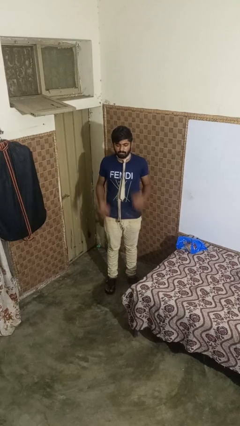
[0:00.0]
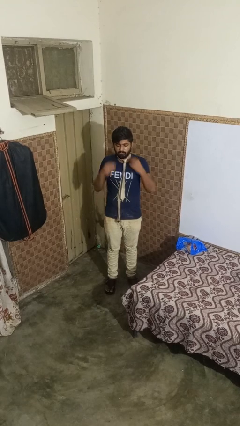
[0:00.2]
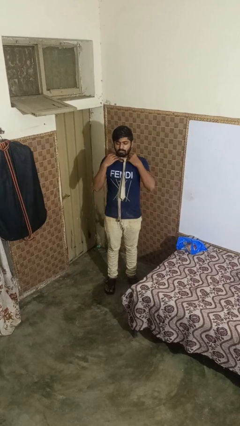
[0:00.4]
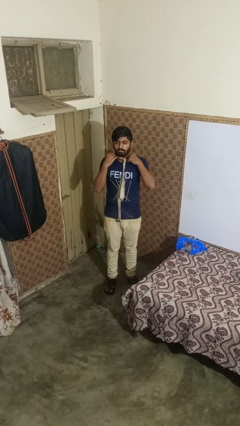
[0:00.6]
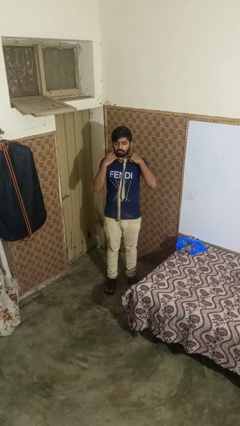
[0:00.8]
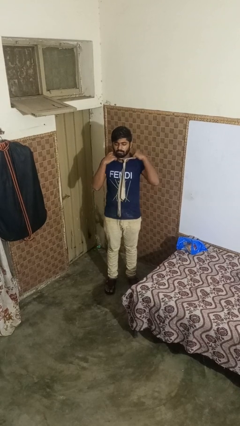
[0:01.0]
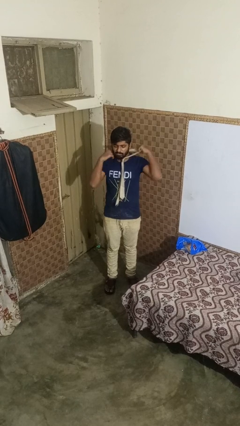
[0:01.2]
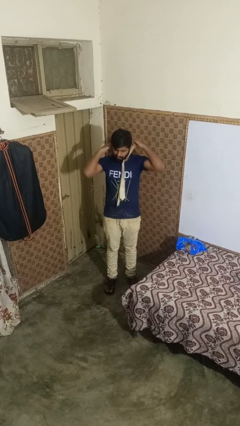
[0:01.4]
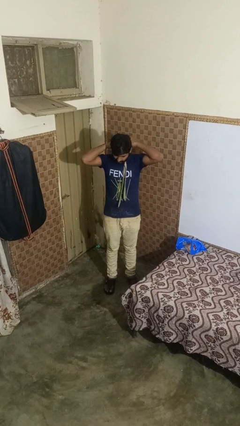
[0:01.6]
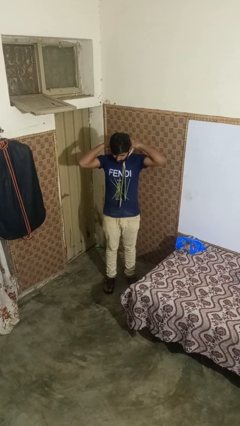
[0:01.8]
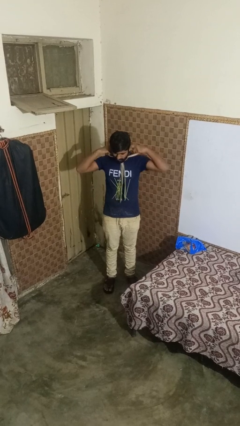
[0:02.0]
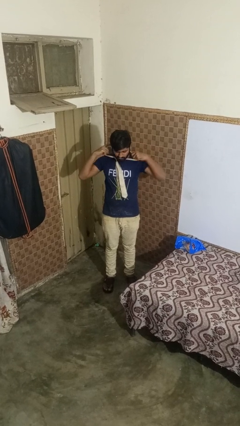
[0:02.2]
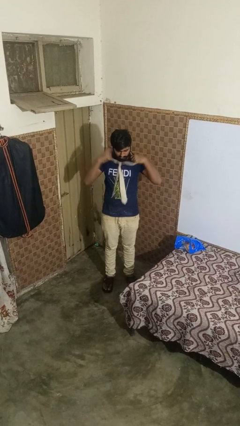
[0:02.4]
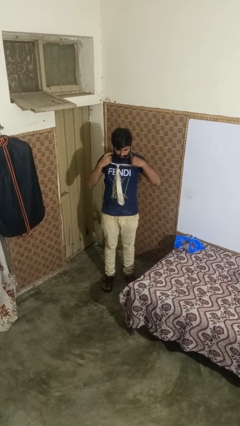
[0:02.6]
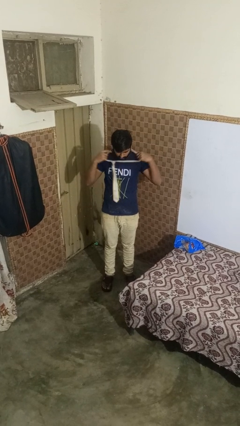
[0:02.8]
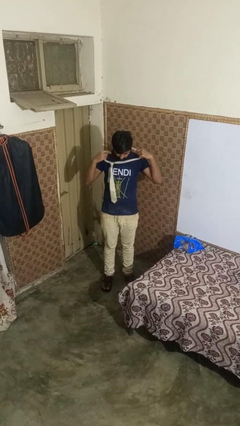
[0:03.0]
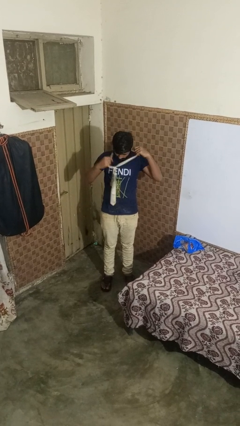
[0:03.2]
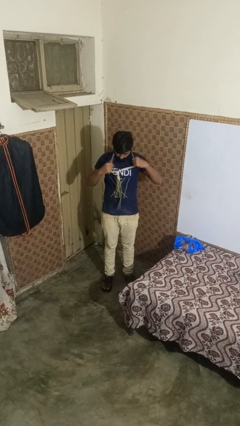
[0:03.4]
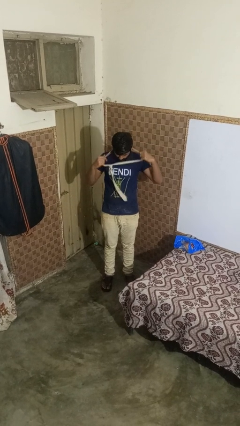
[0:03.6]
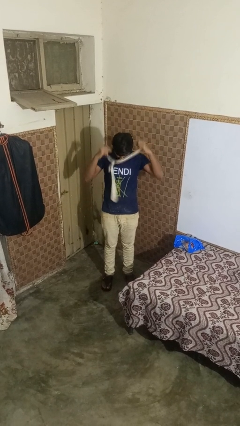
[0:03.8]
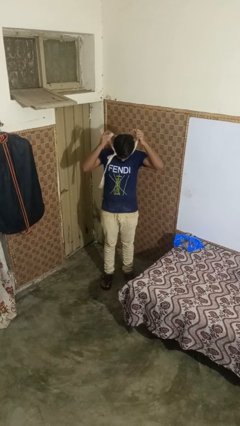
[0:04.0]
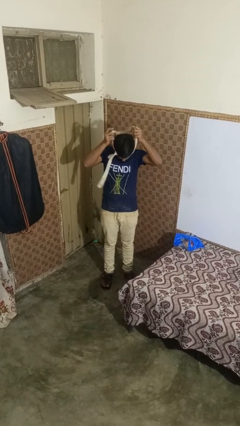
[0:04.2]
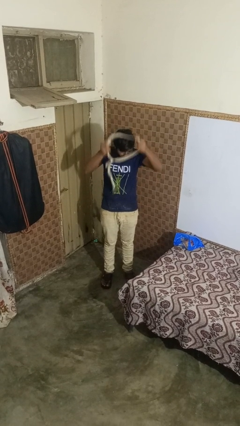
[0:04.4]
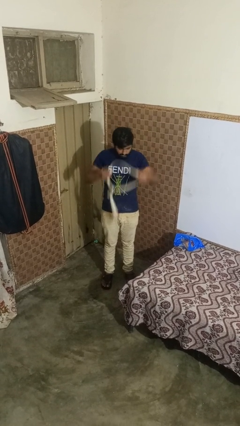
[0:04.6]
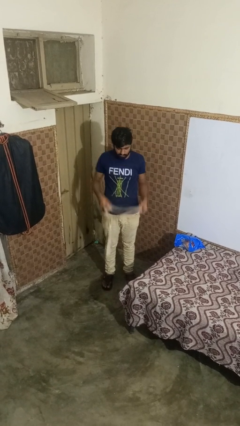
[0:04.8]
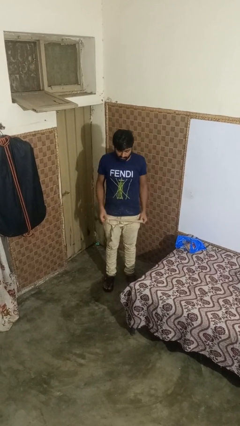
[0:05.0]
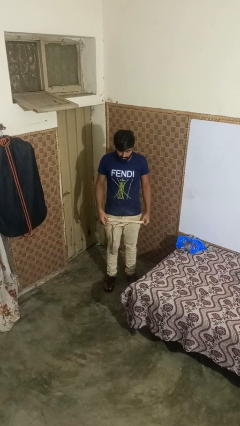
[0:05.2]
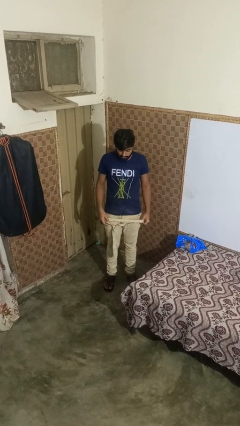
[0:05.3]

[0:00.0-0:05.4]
person takes off necktie

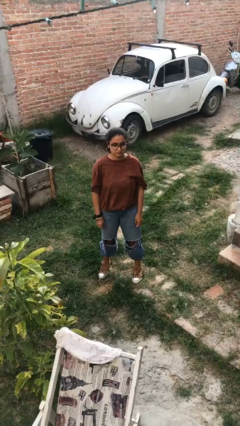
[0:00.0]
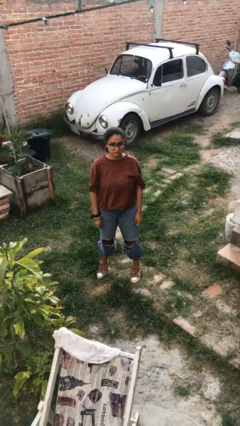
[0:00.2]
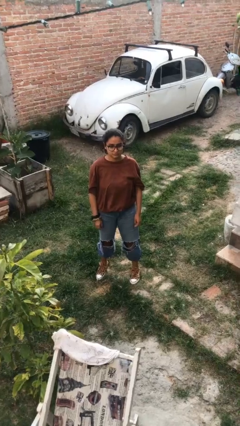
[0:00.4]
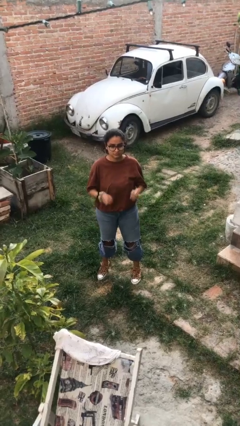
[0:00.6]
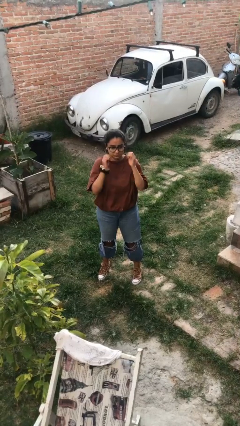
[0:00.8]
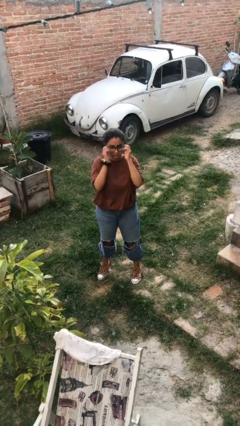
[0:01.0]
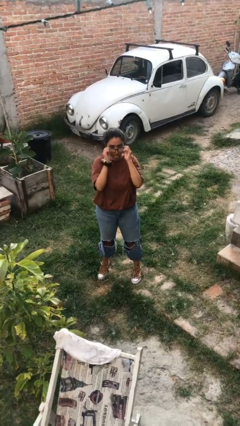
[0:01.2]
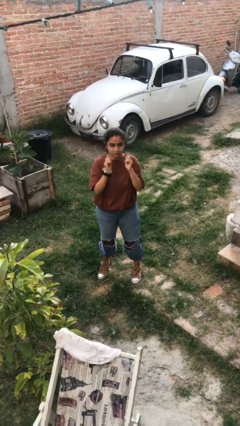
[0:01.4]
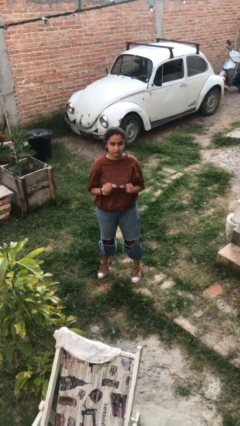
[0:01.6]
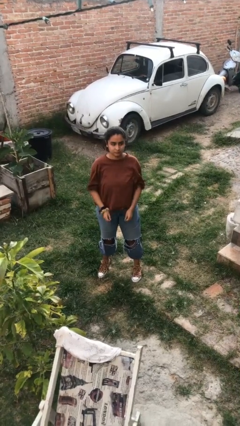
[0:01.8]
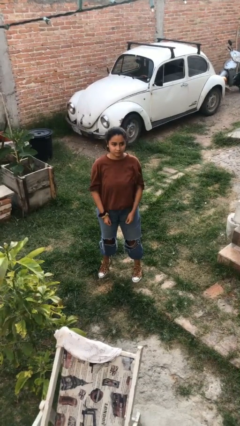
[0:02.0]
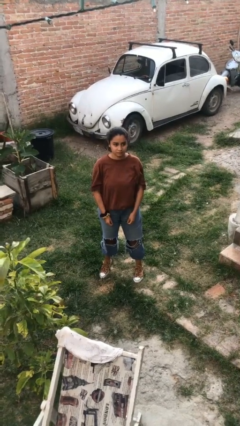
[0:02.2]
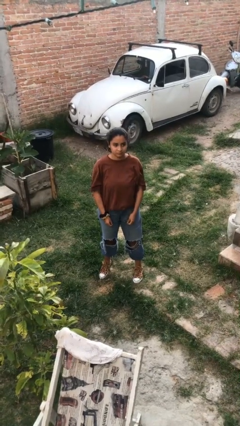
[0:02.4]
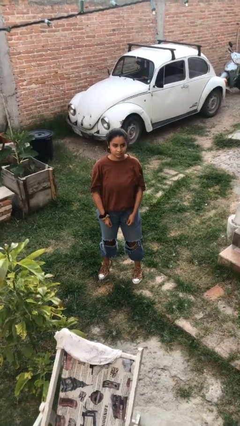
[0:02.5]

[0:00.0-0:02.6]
person takes off glasses

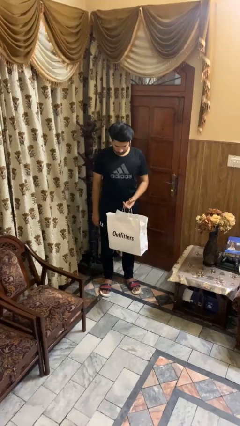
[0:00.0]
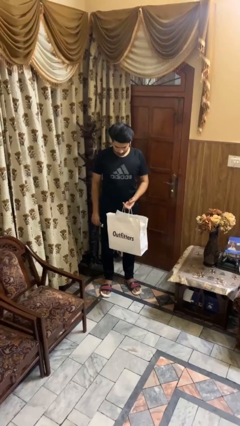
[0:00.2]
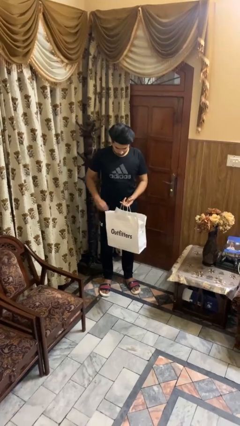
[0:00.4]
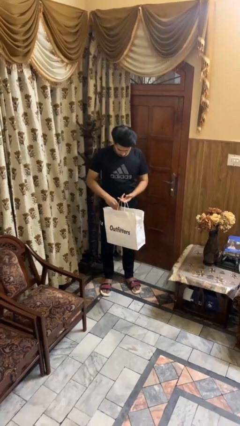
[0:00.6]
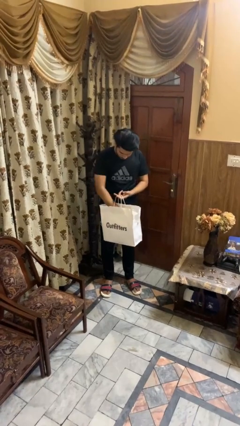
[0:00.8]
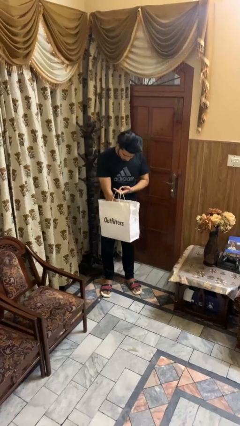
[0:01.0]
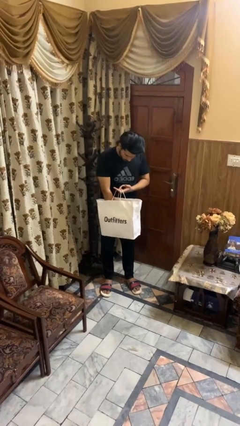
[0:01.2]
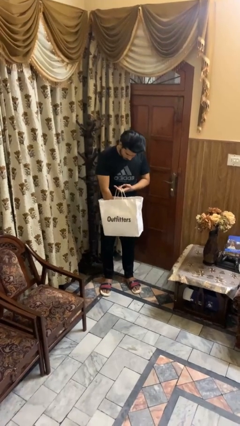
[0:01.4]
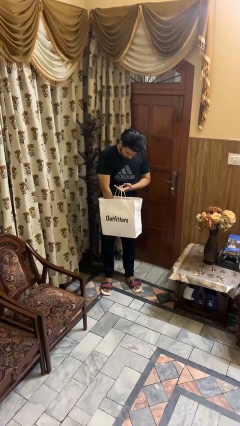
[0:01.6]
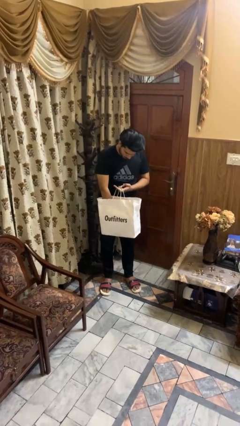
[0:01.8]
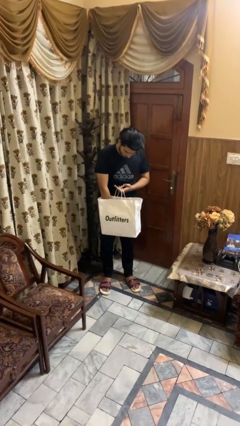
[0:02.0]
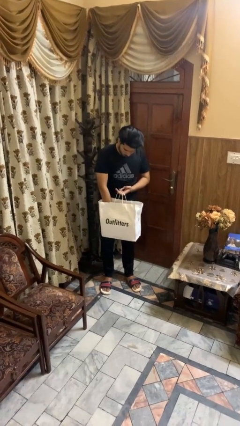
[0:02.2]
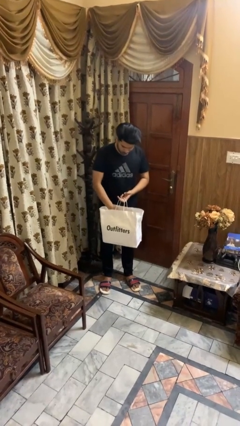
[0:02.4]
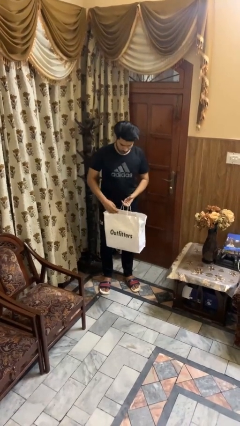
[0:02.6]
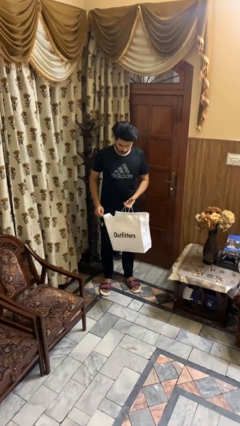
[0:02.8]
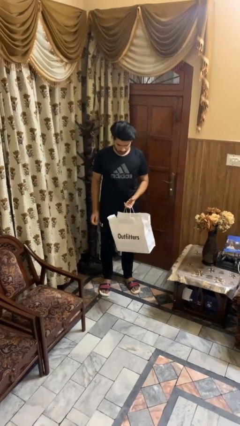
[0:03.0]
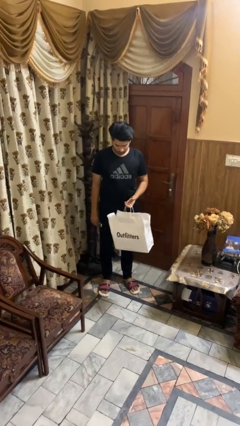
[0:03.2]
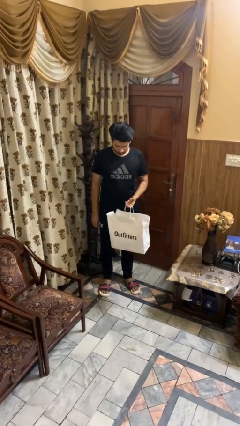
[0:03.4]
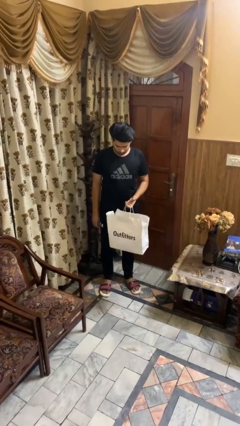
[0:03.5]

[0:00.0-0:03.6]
person searches in bag

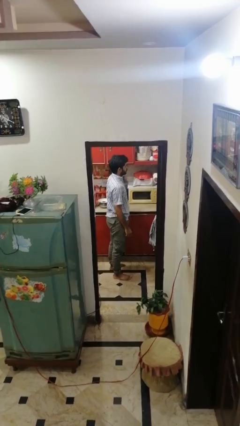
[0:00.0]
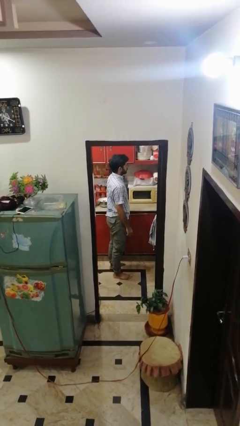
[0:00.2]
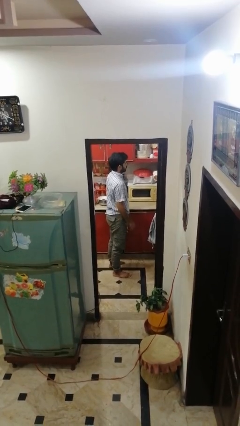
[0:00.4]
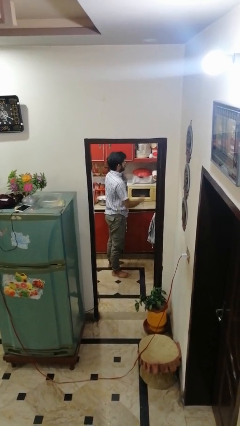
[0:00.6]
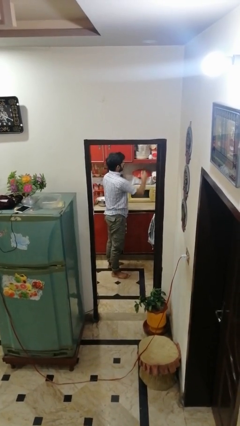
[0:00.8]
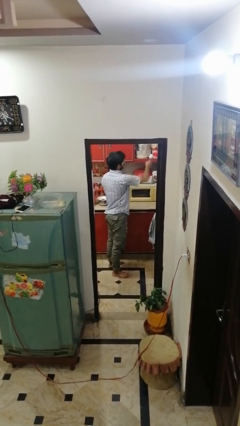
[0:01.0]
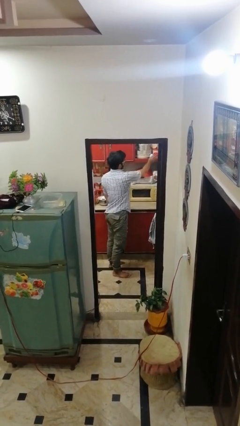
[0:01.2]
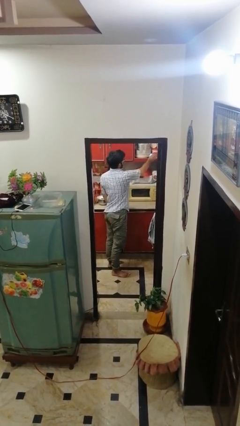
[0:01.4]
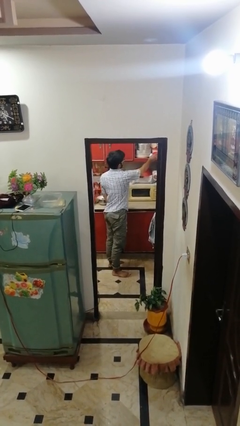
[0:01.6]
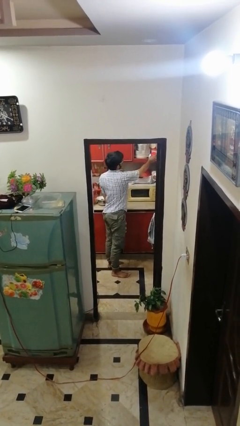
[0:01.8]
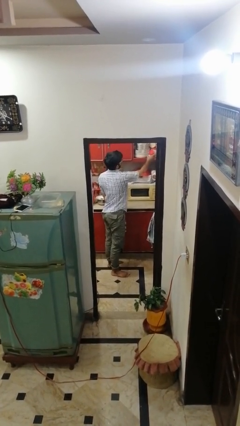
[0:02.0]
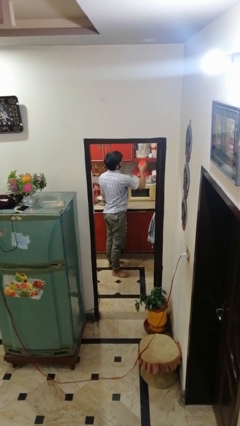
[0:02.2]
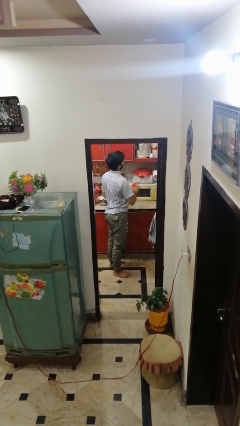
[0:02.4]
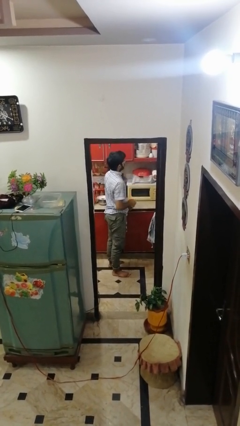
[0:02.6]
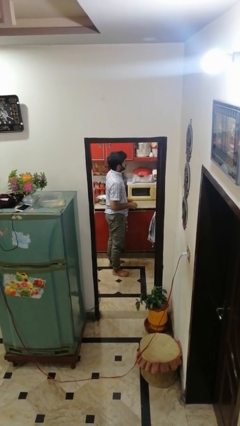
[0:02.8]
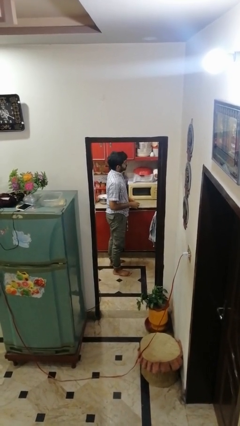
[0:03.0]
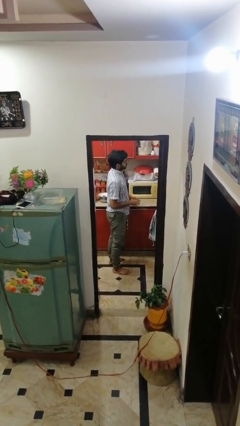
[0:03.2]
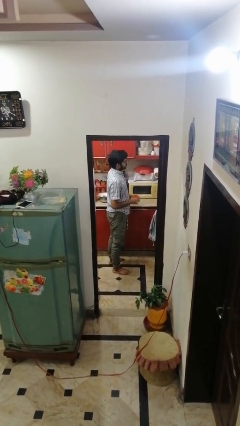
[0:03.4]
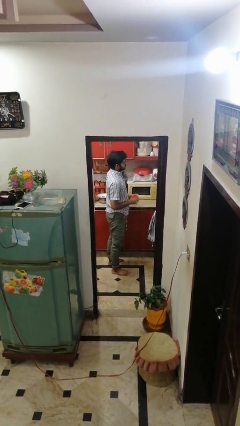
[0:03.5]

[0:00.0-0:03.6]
person picks up object from cabinet

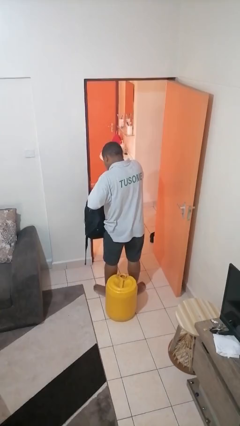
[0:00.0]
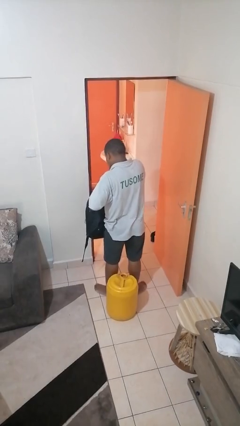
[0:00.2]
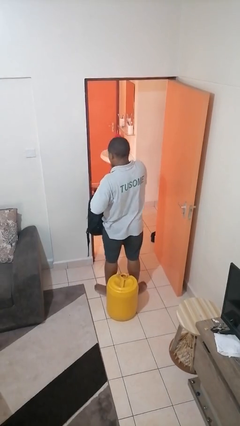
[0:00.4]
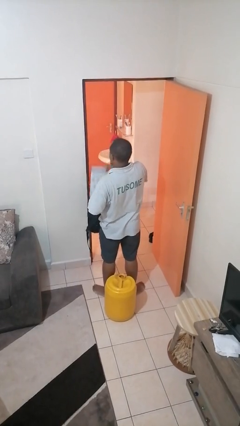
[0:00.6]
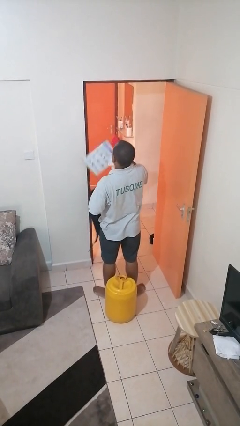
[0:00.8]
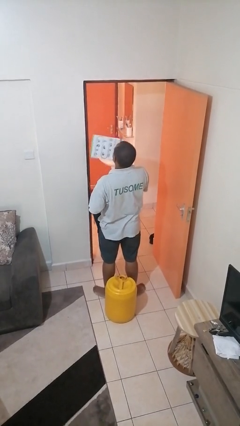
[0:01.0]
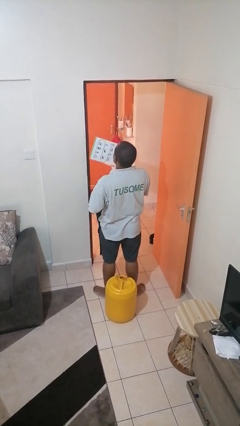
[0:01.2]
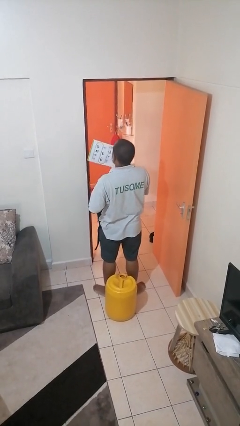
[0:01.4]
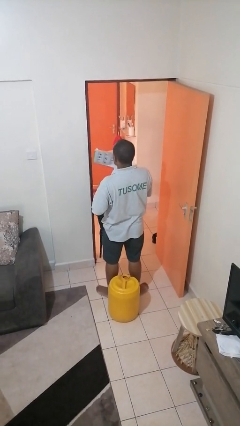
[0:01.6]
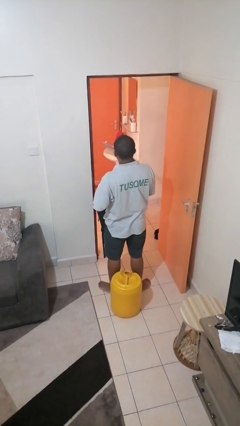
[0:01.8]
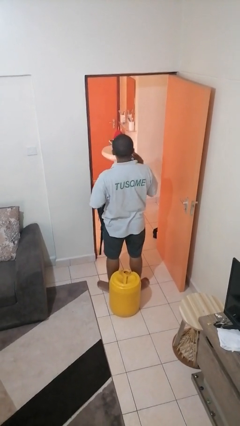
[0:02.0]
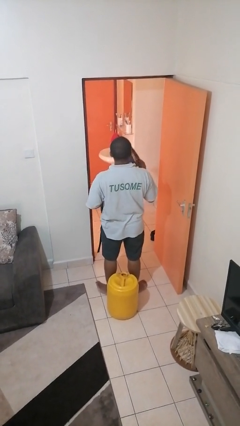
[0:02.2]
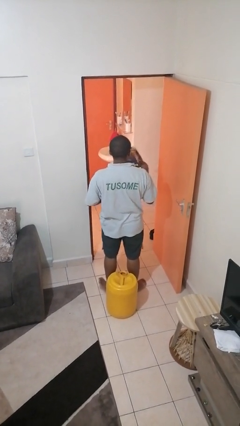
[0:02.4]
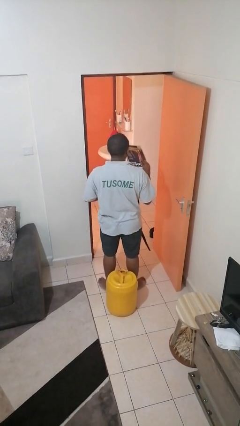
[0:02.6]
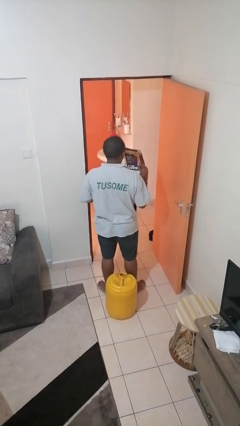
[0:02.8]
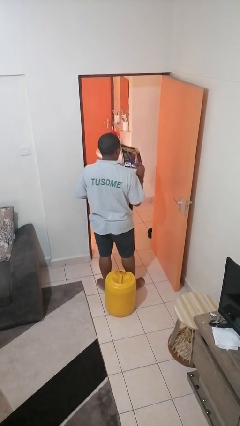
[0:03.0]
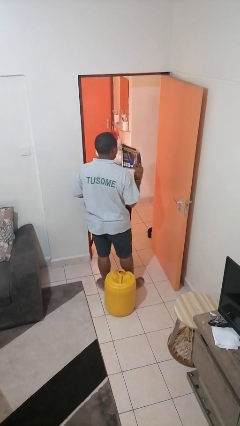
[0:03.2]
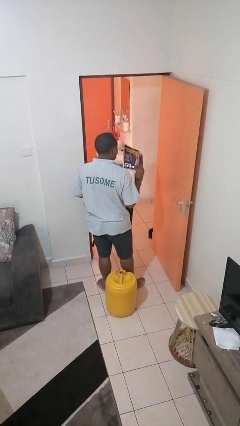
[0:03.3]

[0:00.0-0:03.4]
person takes object from backpack
